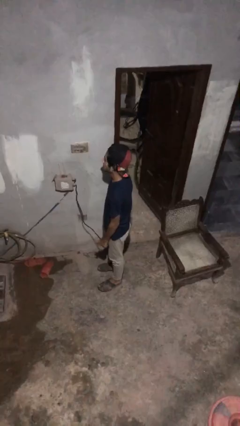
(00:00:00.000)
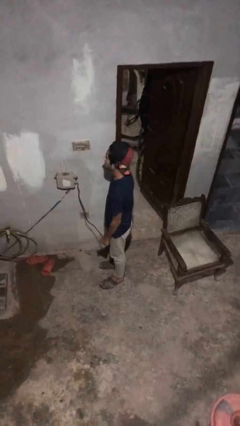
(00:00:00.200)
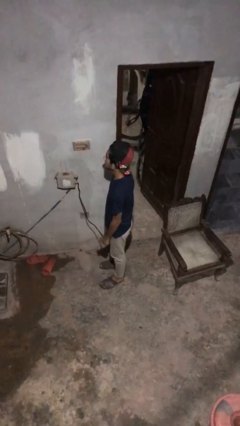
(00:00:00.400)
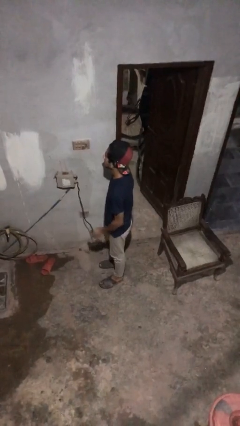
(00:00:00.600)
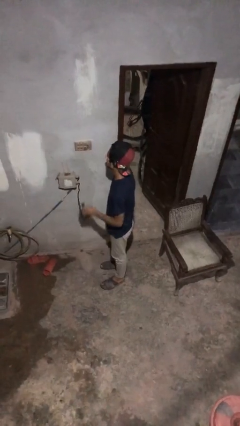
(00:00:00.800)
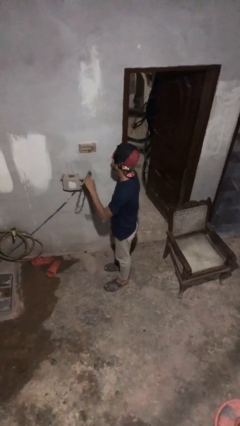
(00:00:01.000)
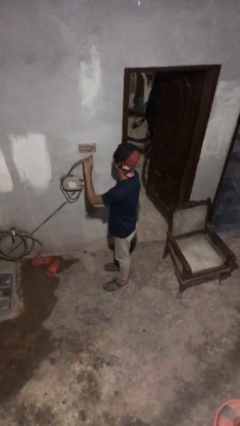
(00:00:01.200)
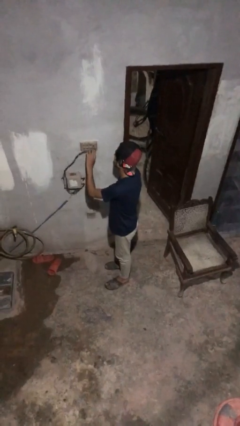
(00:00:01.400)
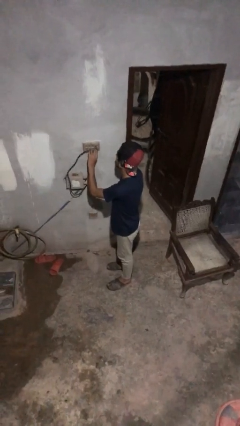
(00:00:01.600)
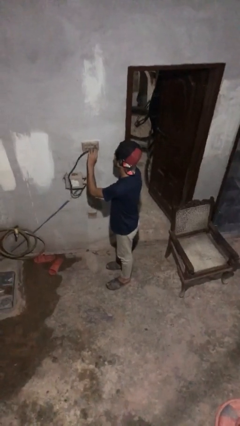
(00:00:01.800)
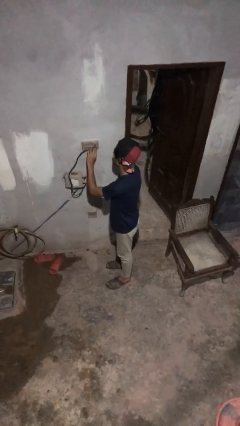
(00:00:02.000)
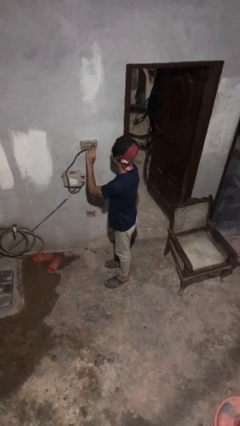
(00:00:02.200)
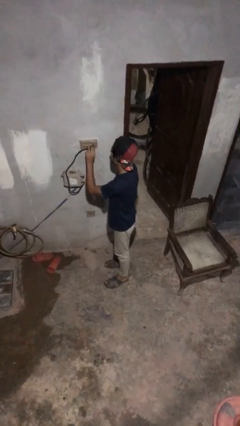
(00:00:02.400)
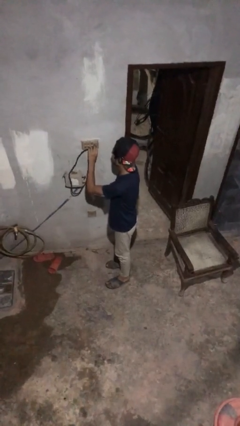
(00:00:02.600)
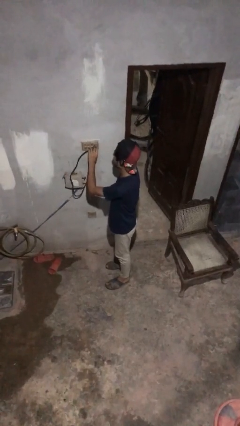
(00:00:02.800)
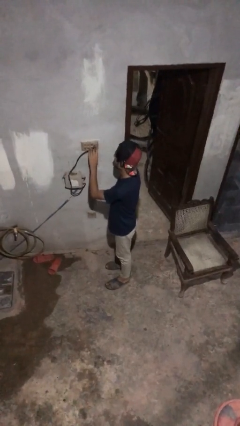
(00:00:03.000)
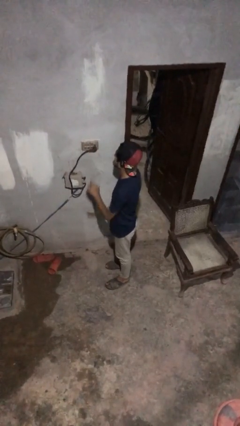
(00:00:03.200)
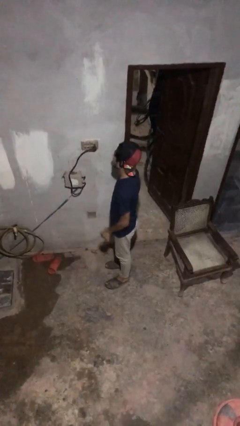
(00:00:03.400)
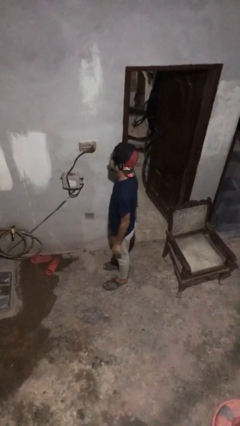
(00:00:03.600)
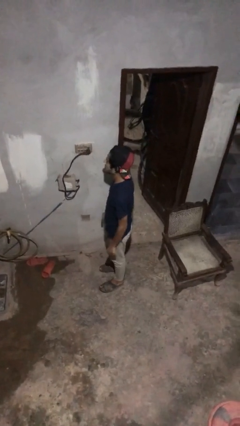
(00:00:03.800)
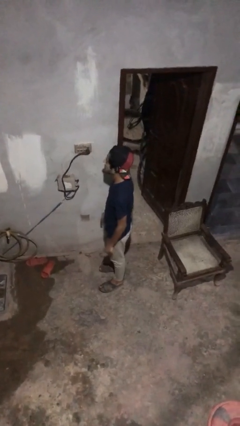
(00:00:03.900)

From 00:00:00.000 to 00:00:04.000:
person plugs into electrical socket

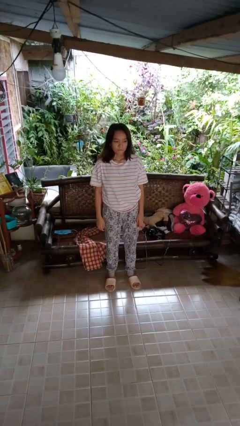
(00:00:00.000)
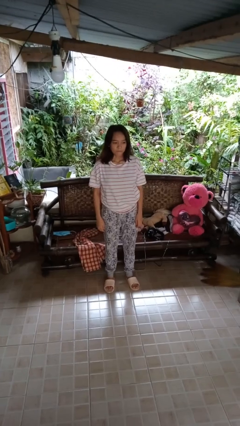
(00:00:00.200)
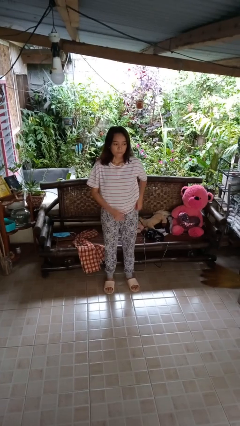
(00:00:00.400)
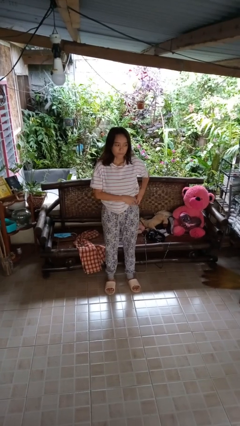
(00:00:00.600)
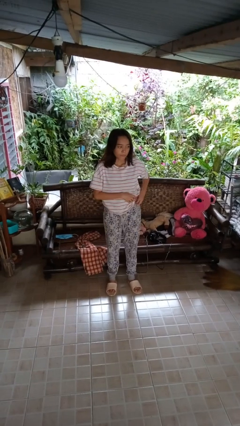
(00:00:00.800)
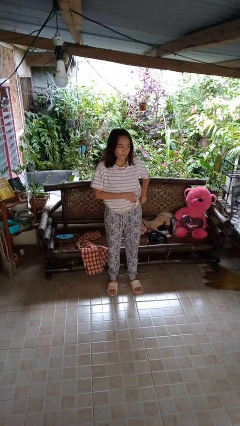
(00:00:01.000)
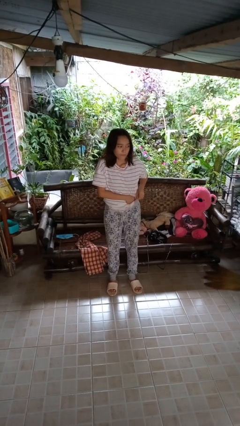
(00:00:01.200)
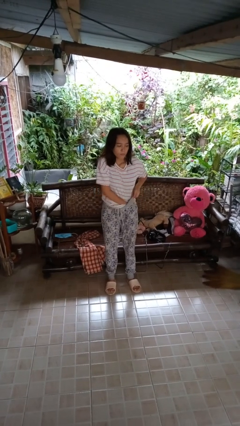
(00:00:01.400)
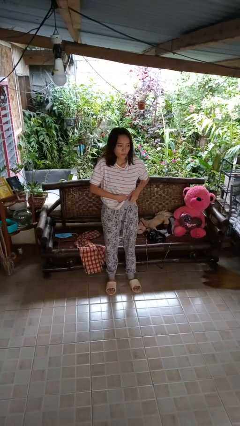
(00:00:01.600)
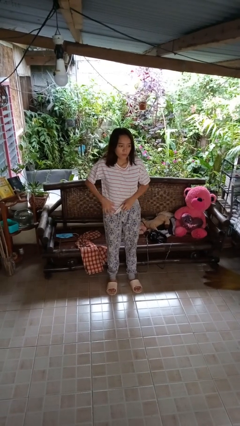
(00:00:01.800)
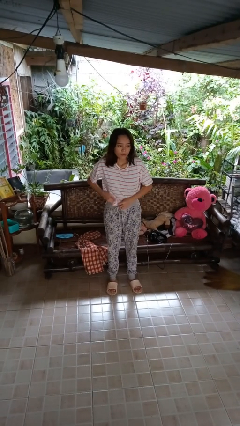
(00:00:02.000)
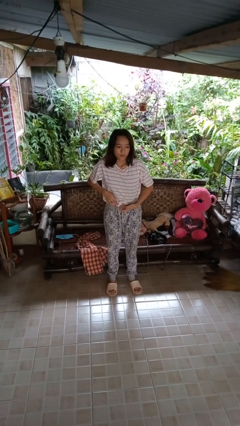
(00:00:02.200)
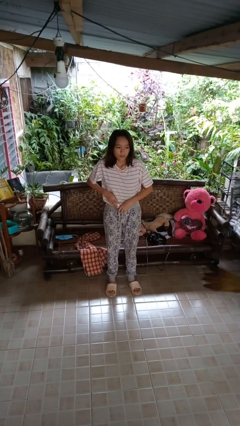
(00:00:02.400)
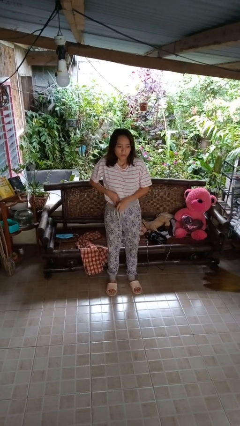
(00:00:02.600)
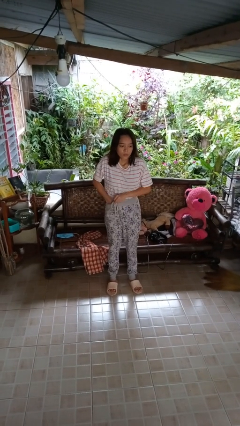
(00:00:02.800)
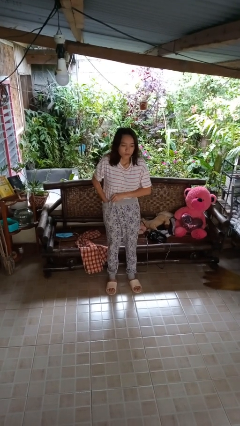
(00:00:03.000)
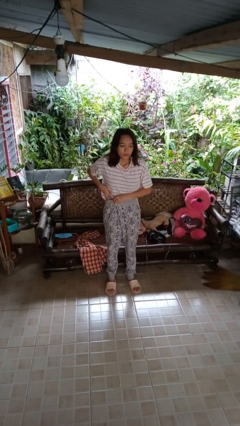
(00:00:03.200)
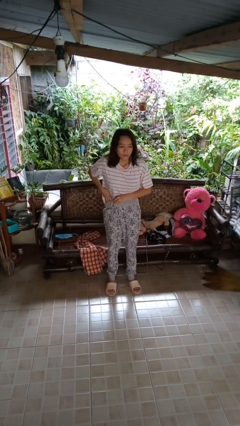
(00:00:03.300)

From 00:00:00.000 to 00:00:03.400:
person tucks in shirt

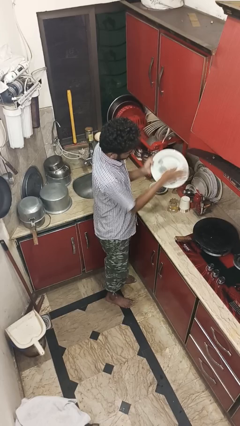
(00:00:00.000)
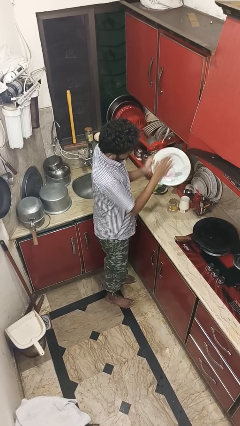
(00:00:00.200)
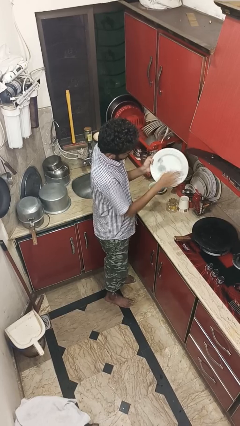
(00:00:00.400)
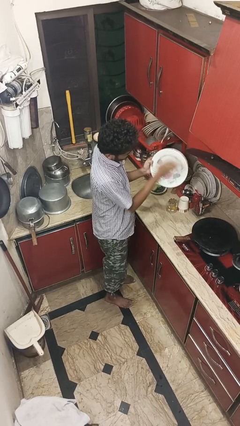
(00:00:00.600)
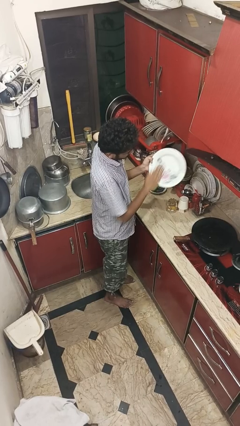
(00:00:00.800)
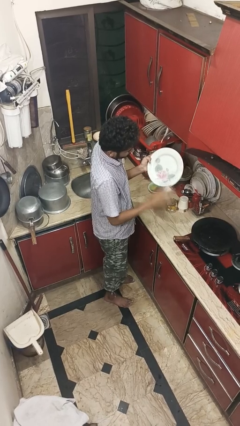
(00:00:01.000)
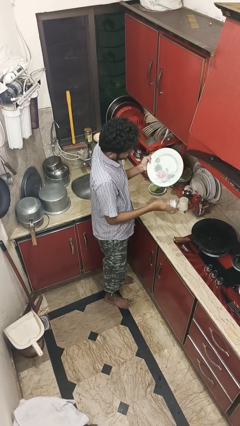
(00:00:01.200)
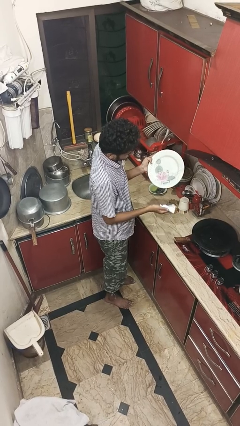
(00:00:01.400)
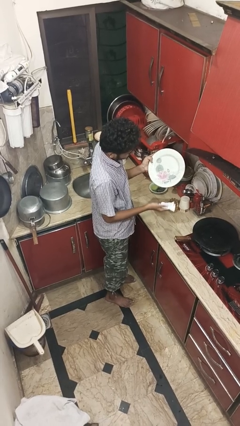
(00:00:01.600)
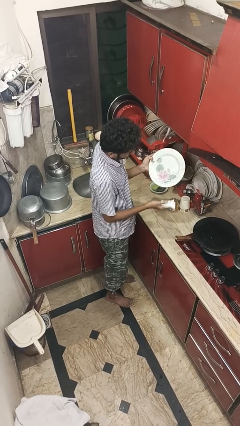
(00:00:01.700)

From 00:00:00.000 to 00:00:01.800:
person dries dish

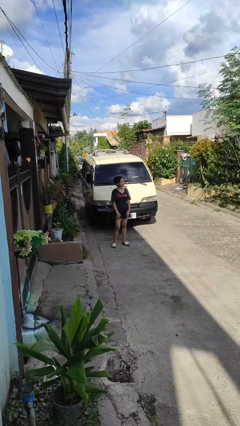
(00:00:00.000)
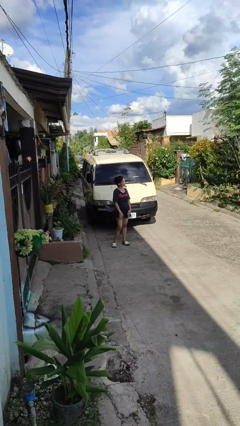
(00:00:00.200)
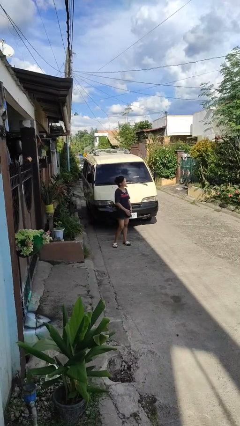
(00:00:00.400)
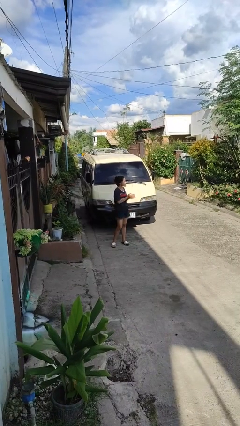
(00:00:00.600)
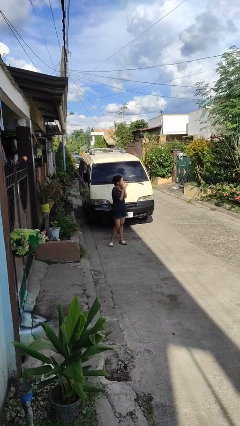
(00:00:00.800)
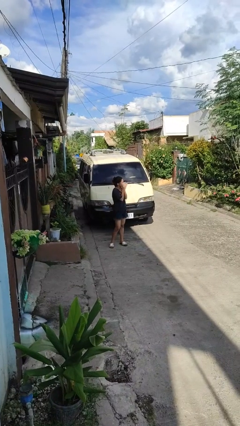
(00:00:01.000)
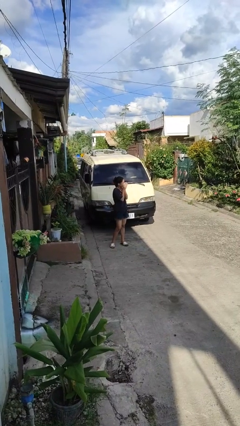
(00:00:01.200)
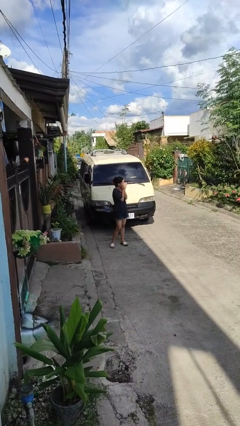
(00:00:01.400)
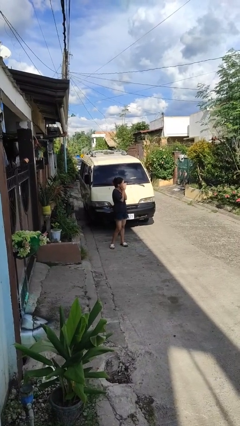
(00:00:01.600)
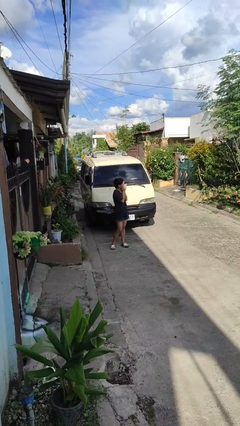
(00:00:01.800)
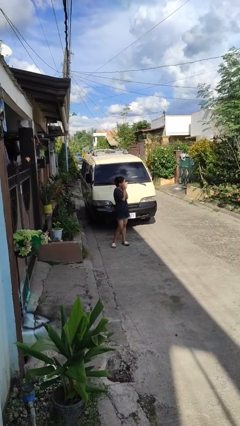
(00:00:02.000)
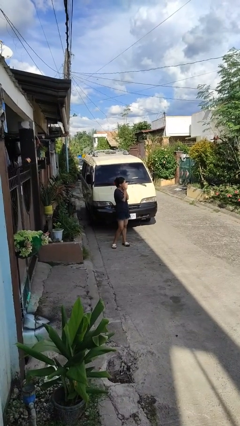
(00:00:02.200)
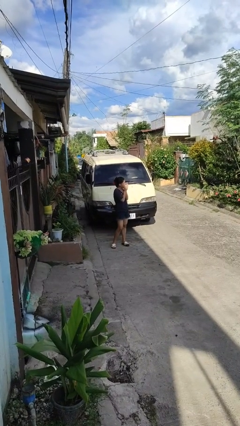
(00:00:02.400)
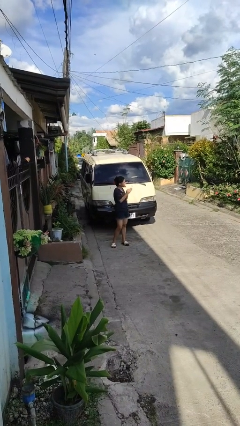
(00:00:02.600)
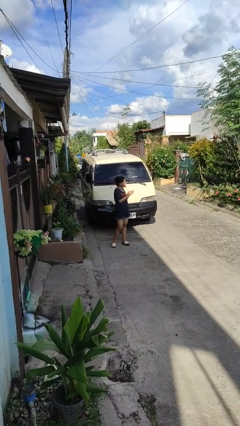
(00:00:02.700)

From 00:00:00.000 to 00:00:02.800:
person blows into hands

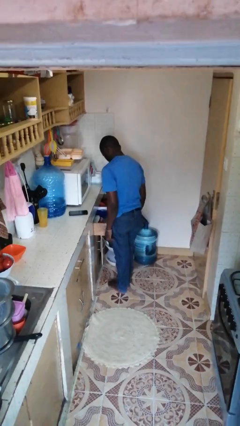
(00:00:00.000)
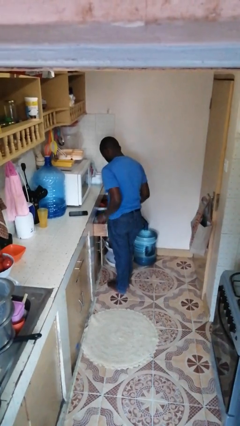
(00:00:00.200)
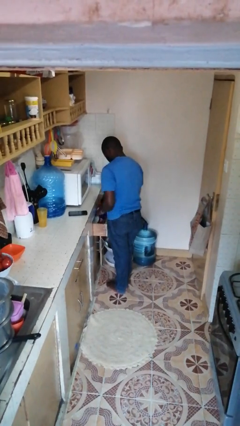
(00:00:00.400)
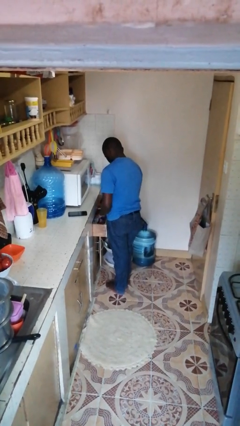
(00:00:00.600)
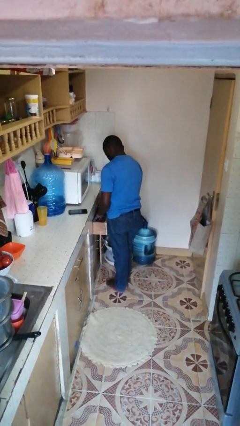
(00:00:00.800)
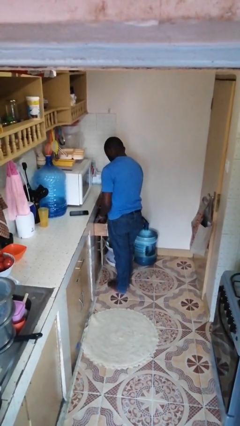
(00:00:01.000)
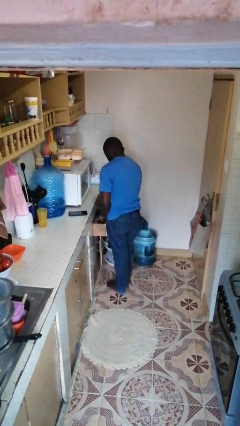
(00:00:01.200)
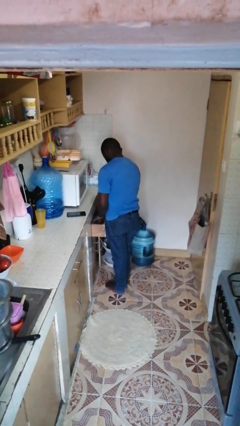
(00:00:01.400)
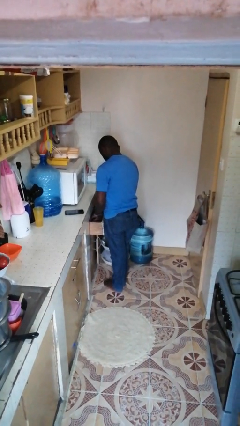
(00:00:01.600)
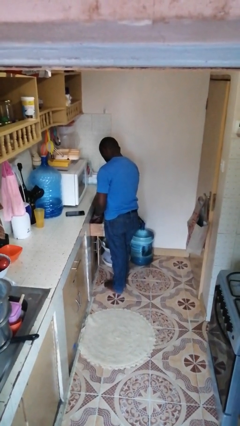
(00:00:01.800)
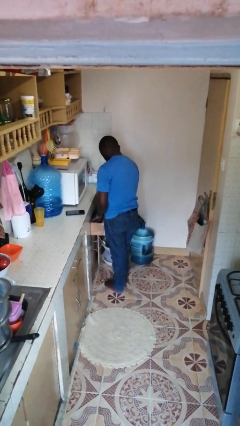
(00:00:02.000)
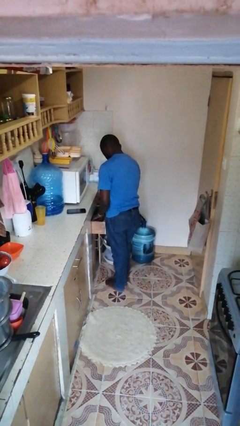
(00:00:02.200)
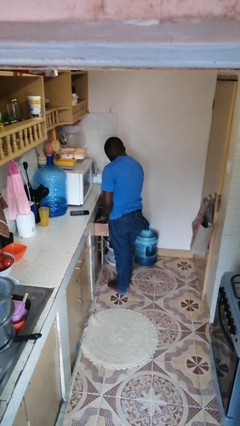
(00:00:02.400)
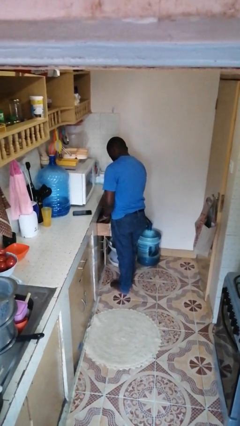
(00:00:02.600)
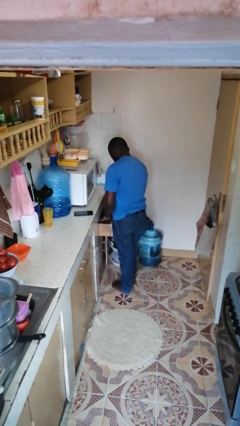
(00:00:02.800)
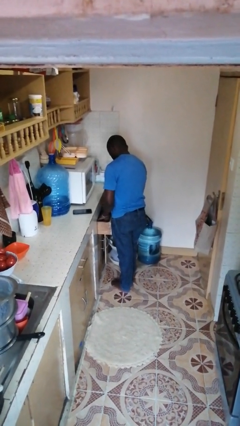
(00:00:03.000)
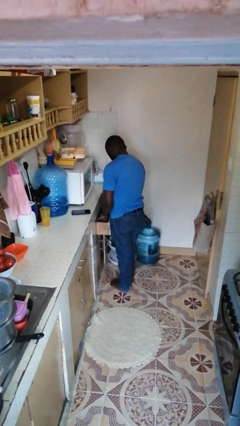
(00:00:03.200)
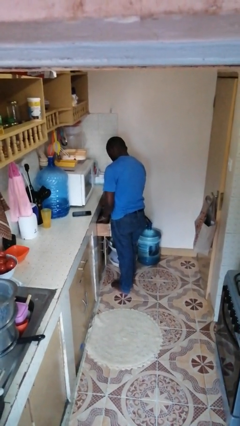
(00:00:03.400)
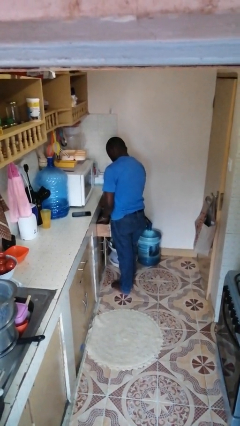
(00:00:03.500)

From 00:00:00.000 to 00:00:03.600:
person searches in kitchen drawer

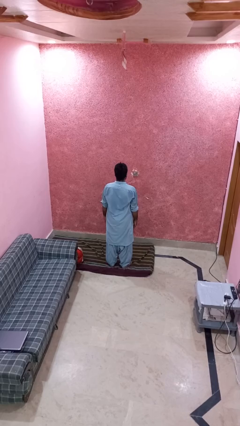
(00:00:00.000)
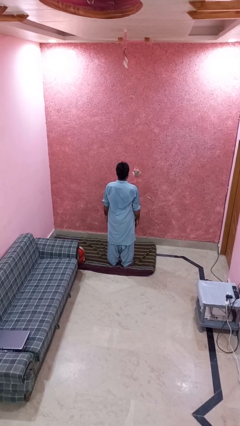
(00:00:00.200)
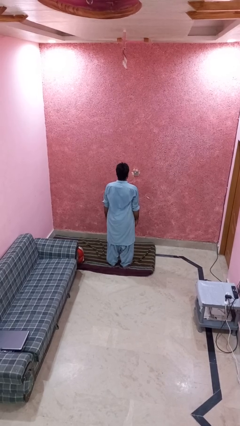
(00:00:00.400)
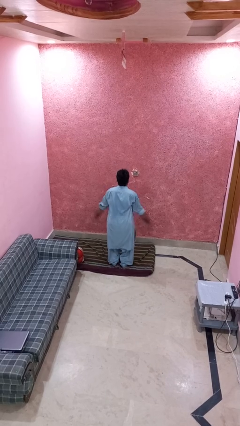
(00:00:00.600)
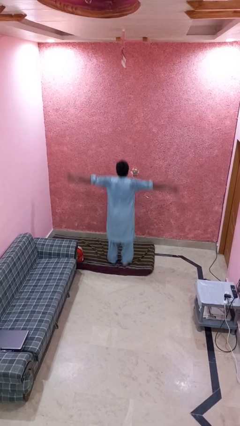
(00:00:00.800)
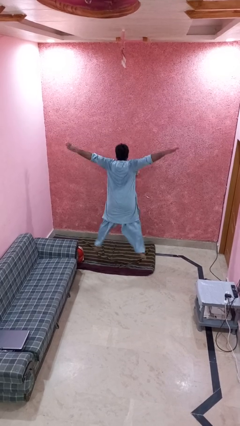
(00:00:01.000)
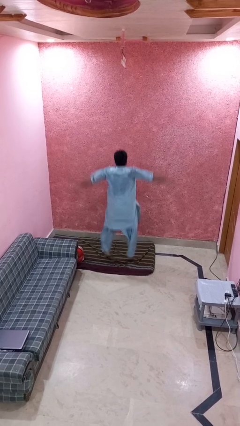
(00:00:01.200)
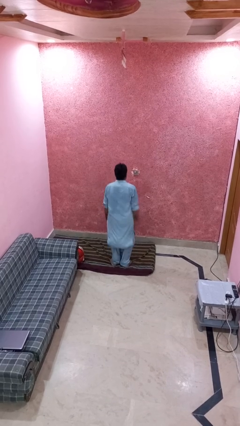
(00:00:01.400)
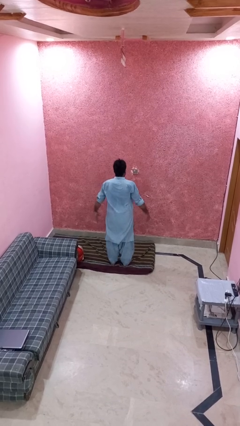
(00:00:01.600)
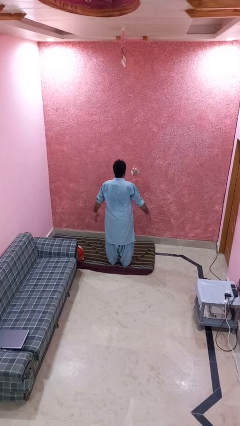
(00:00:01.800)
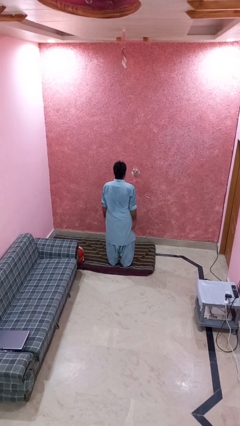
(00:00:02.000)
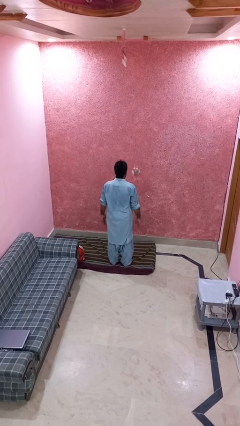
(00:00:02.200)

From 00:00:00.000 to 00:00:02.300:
person exercises with jumping jacks
